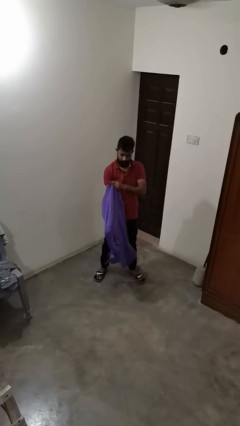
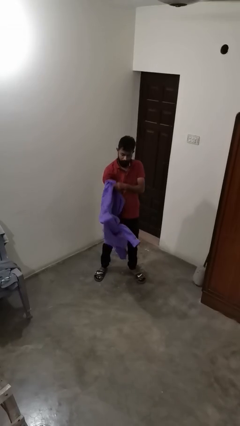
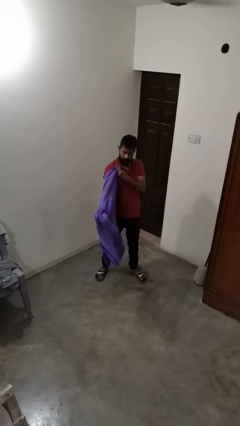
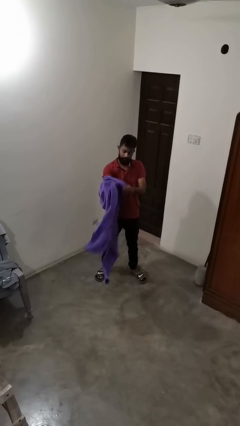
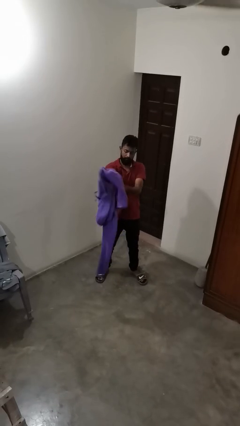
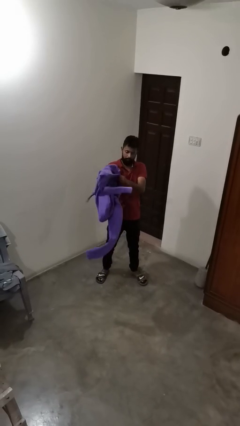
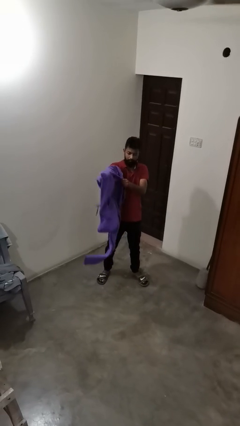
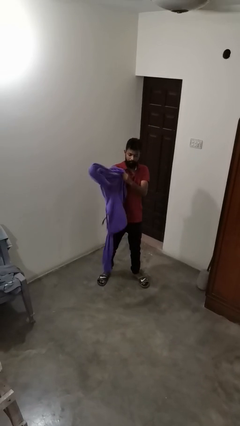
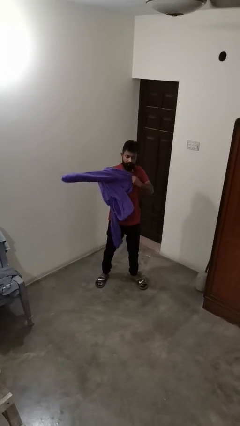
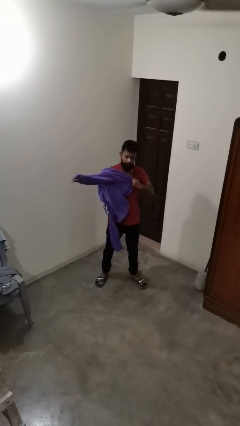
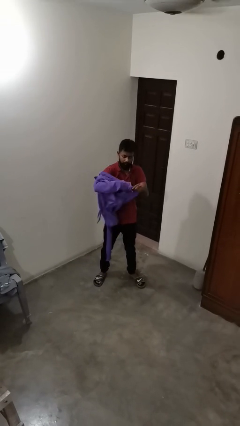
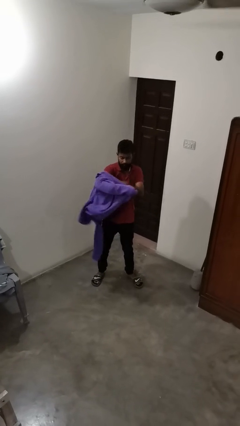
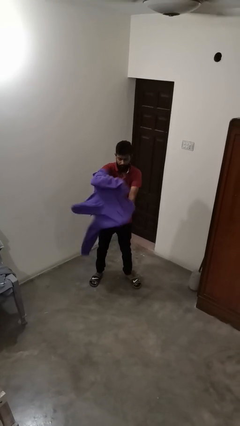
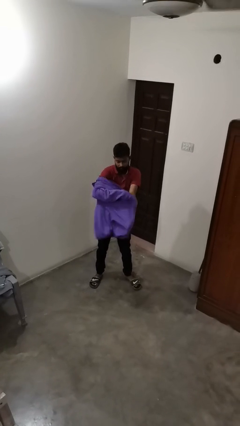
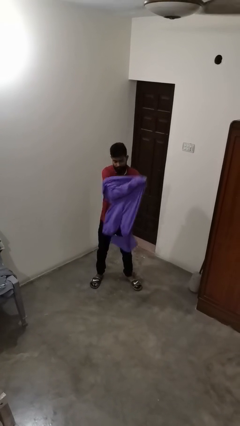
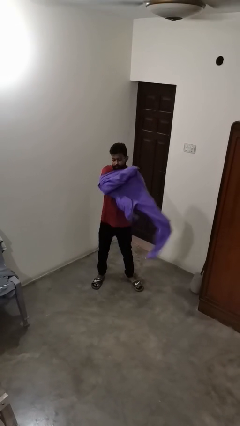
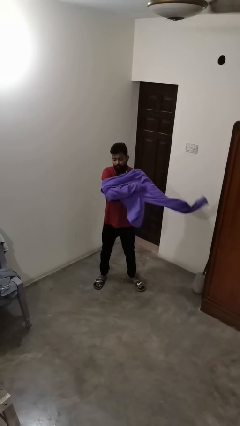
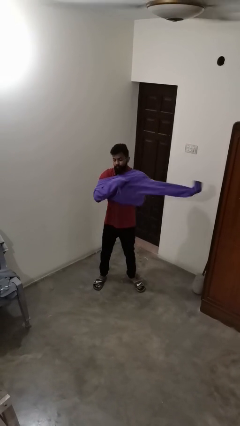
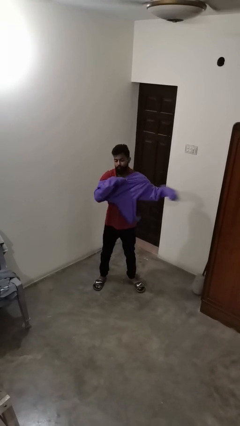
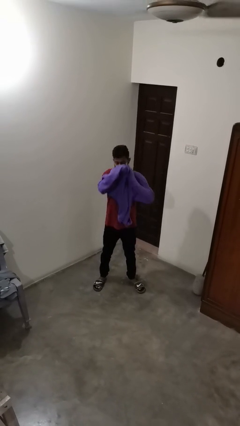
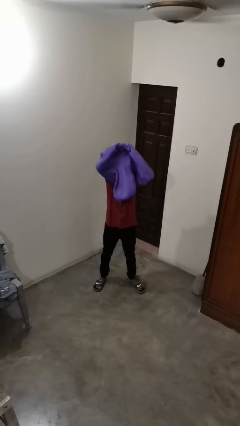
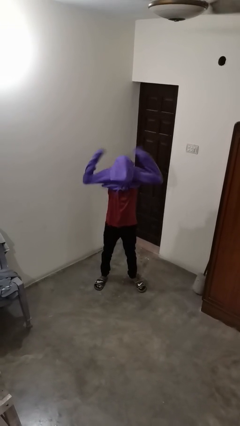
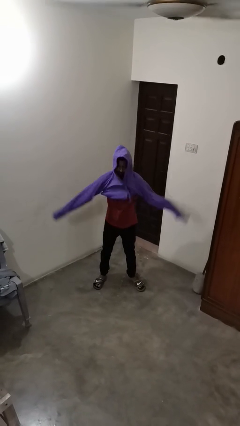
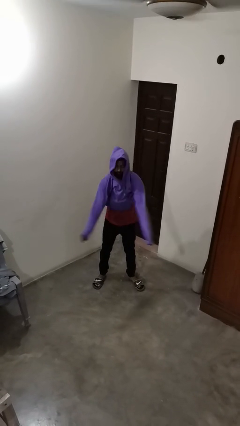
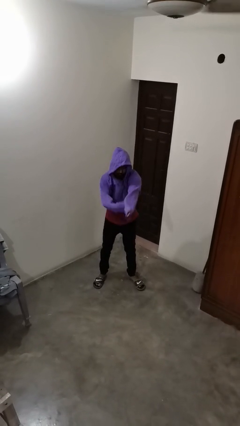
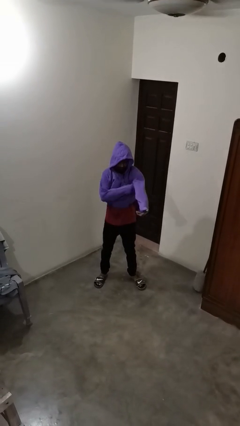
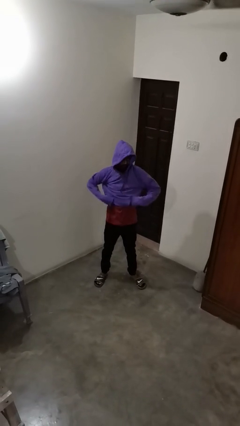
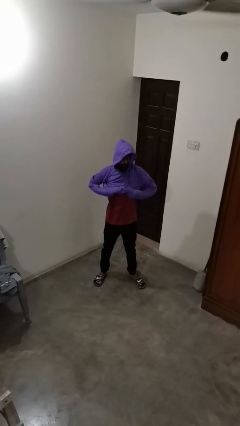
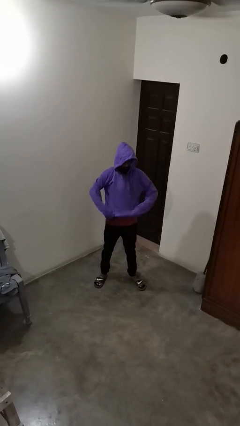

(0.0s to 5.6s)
person puts on hoodie

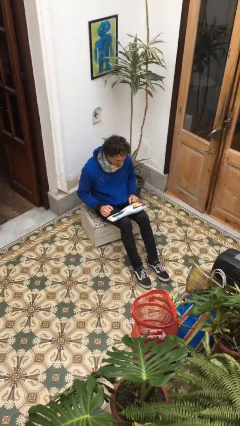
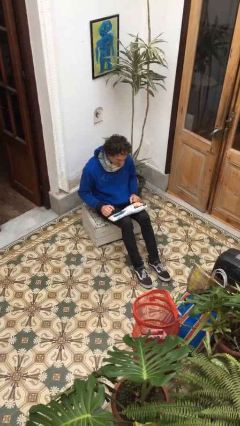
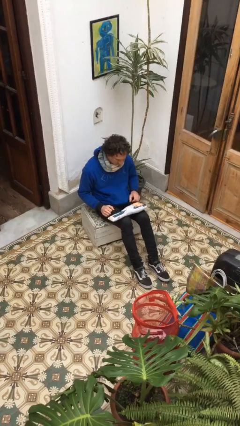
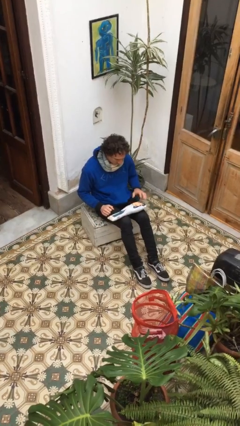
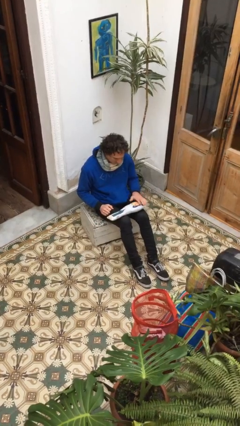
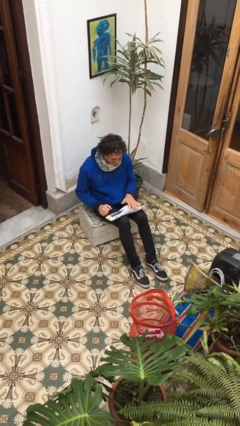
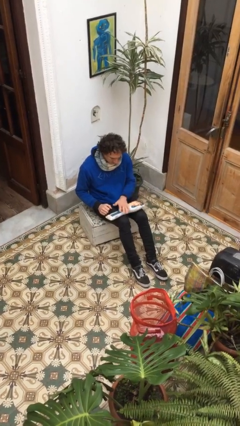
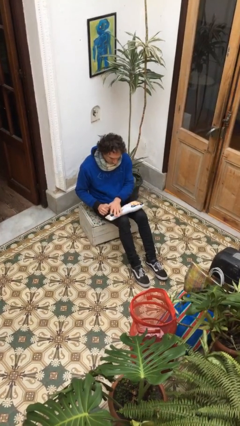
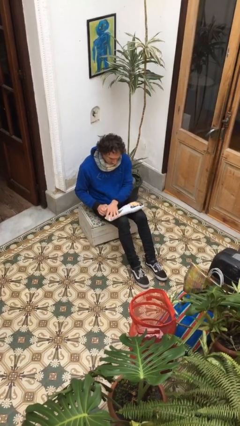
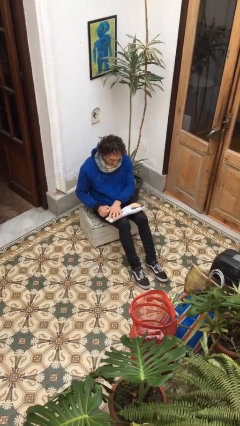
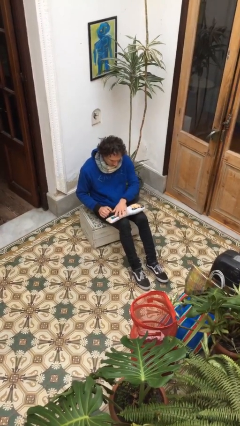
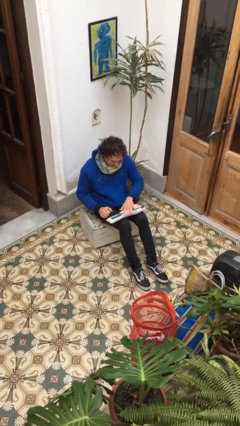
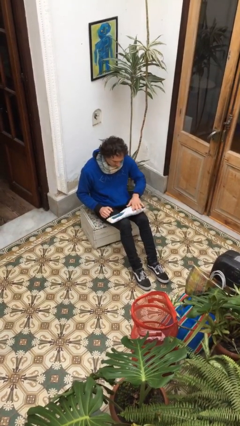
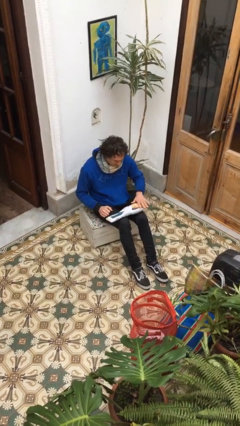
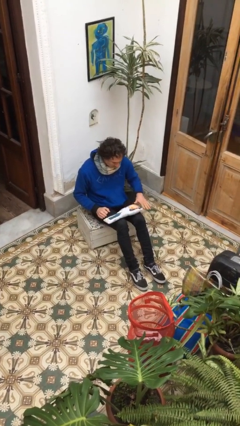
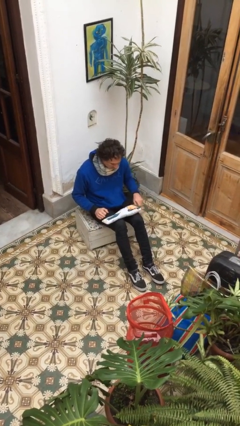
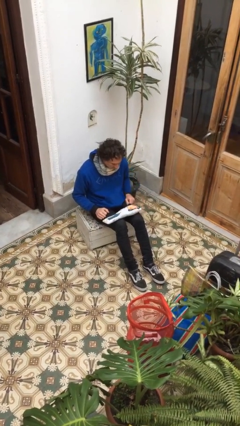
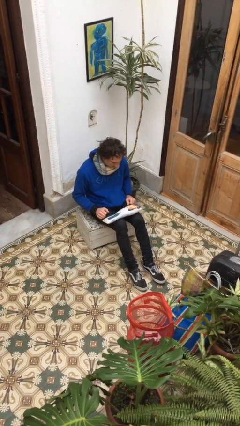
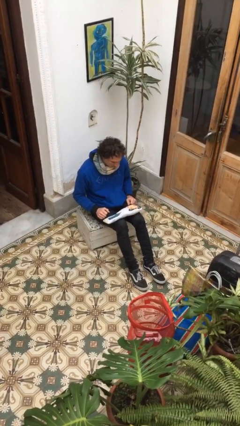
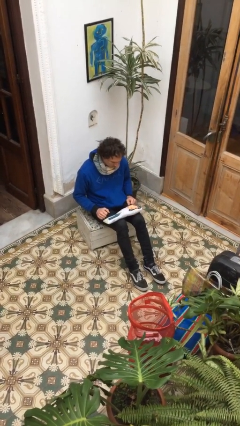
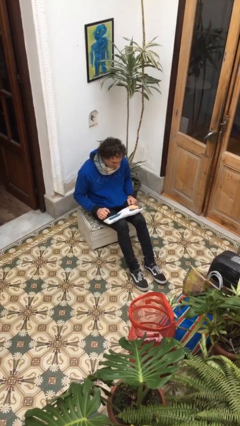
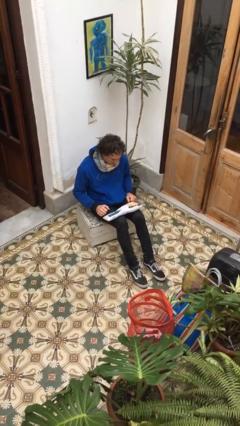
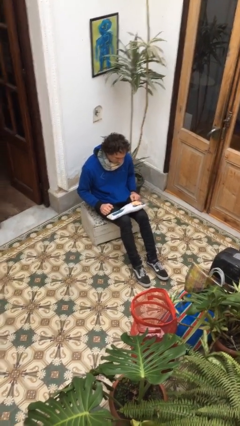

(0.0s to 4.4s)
person waves hand over object

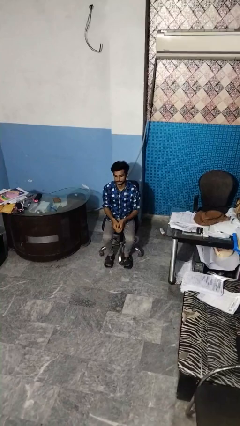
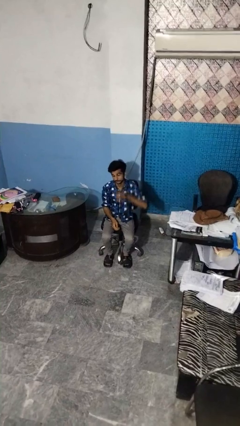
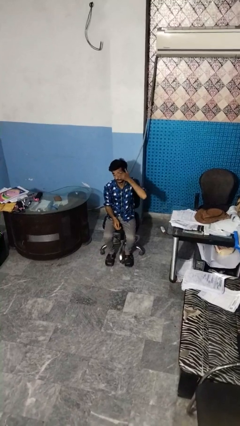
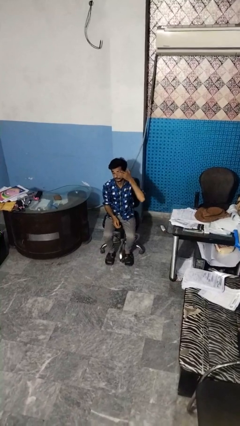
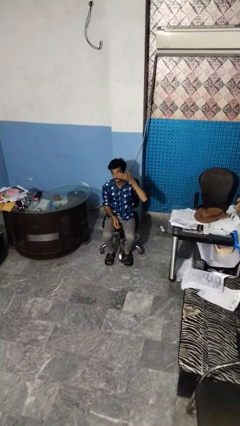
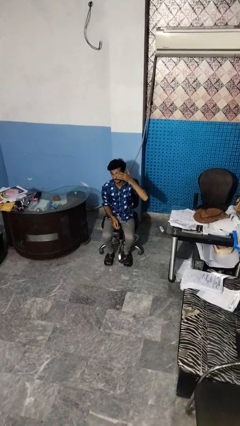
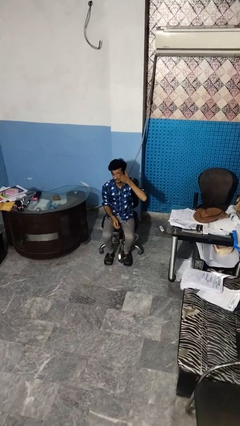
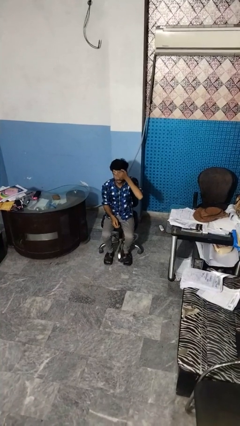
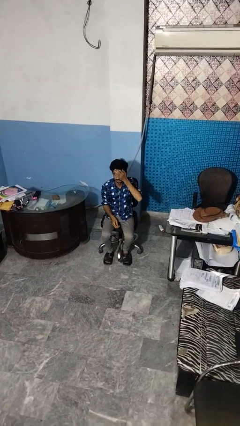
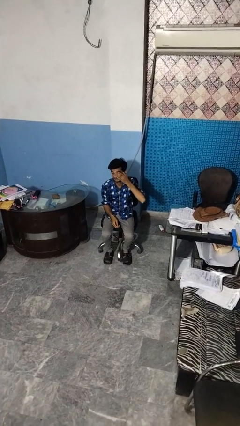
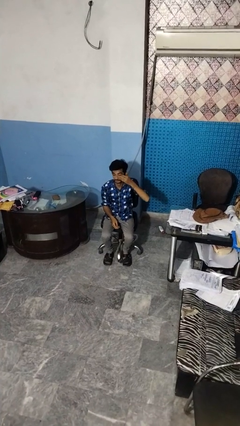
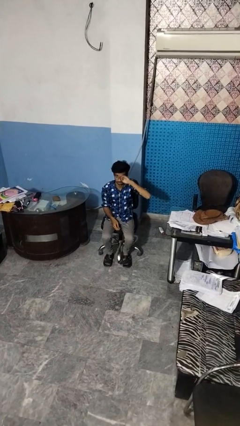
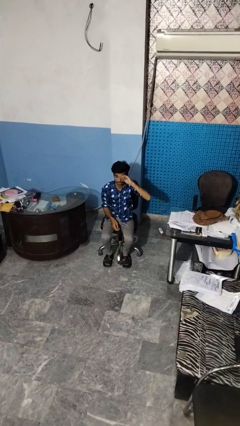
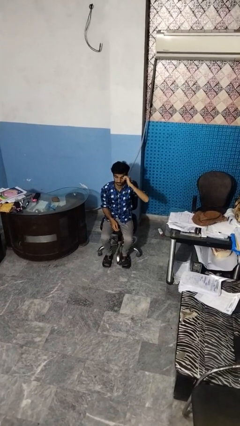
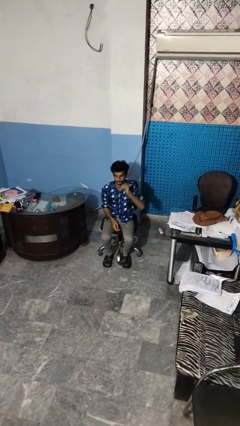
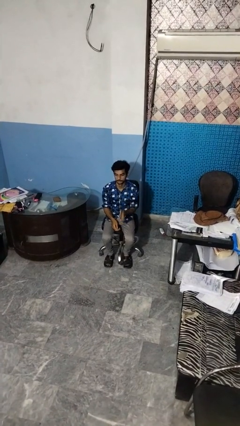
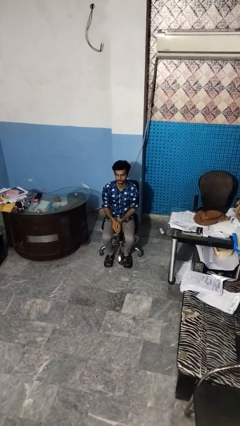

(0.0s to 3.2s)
person rubs eyes

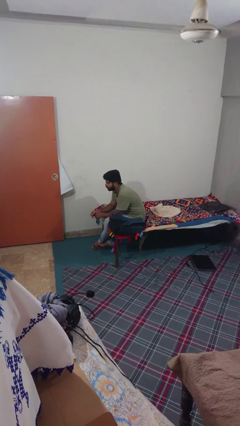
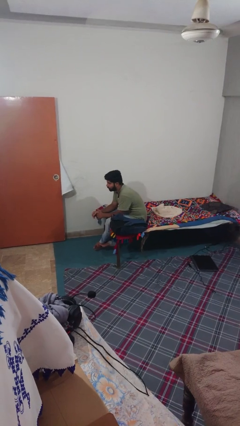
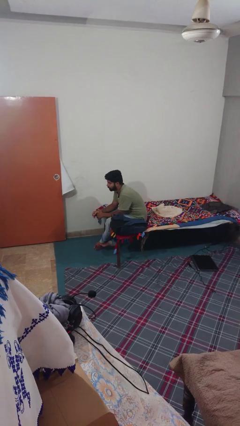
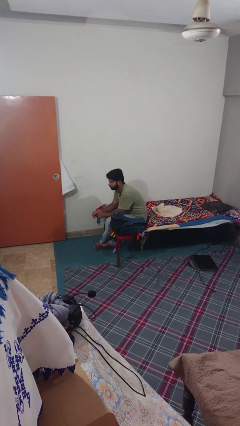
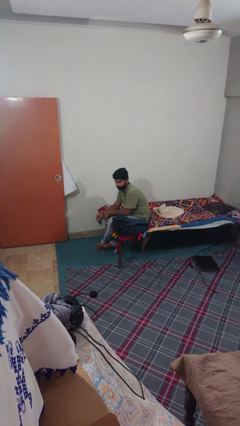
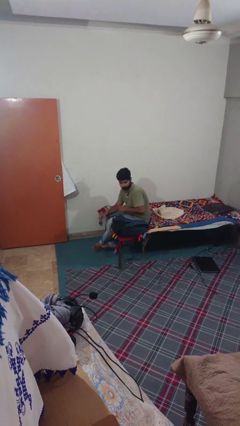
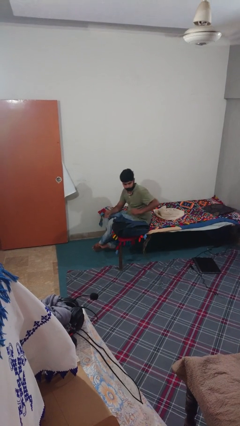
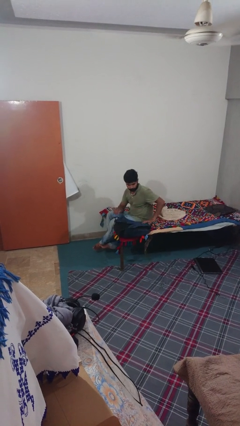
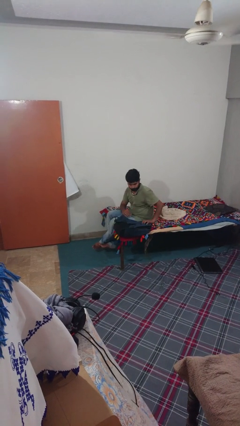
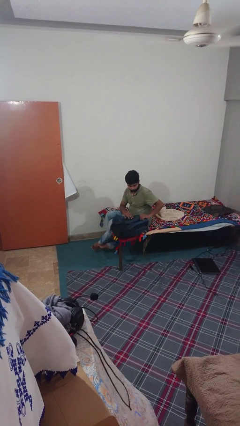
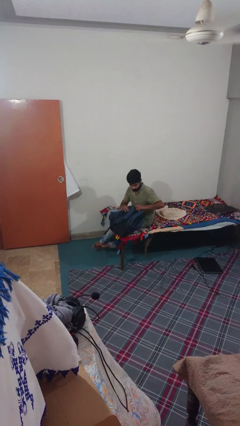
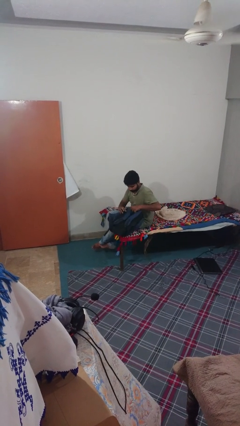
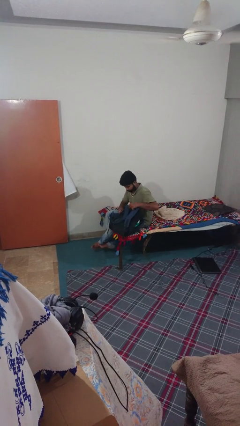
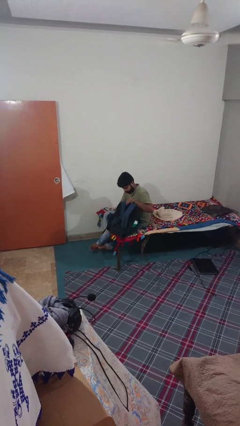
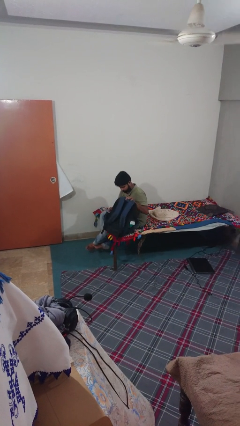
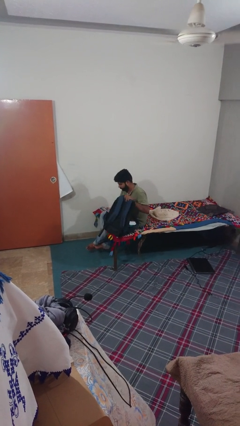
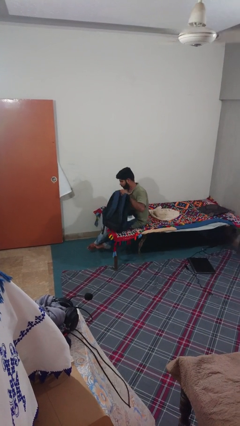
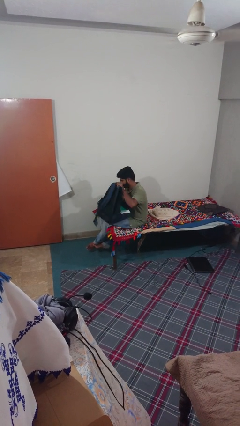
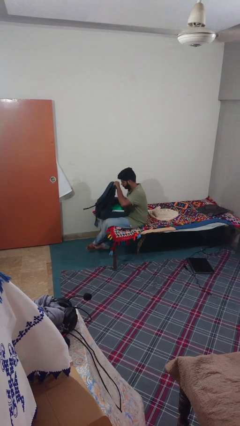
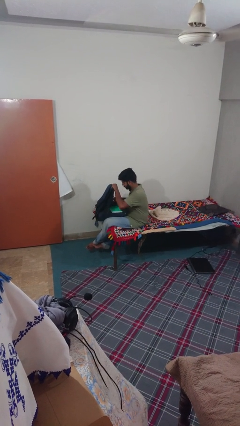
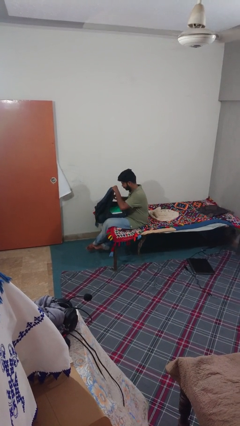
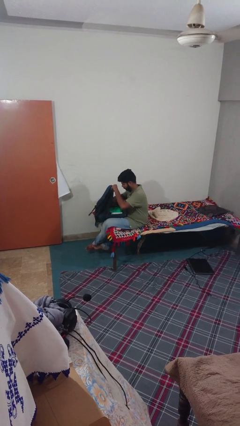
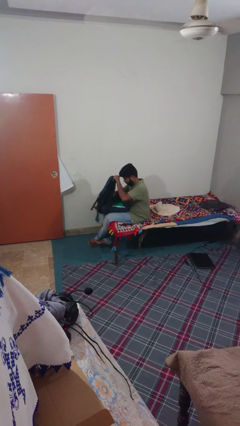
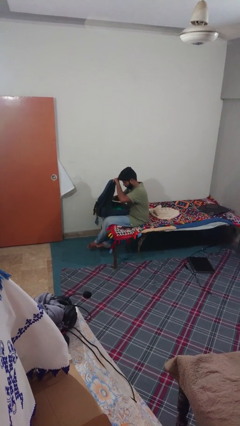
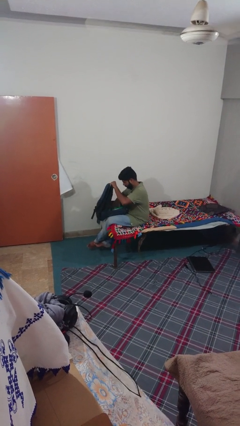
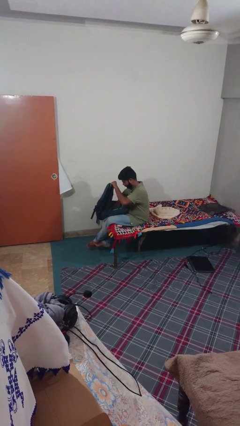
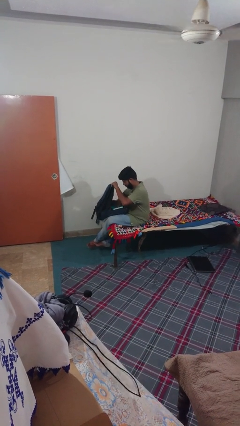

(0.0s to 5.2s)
person searches in backpack
